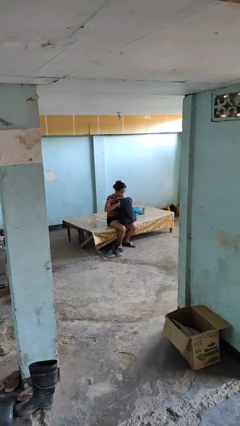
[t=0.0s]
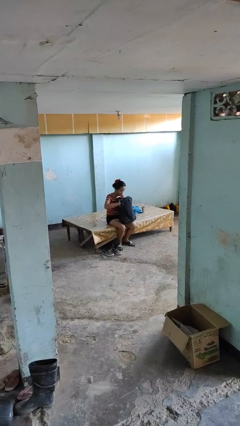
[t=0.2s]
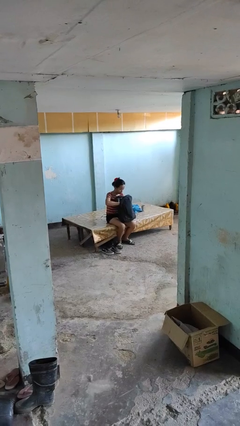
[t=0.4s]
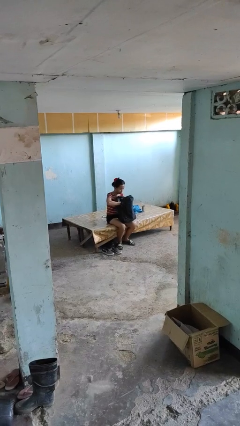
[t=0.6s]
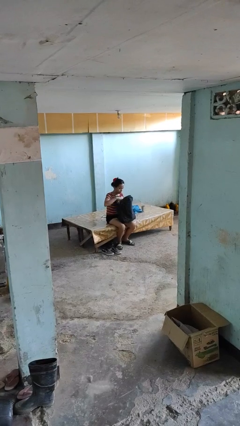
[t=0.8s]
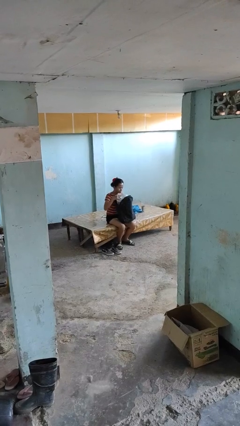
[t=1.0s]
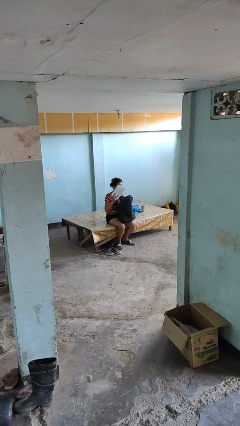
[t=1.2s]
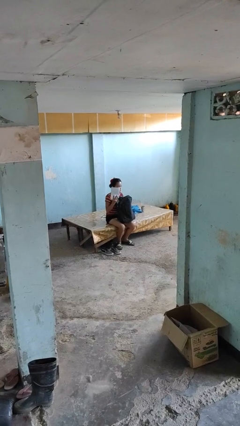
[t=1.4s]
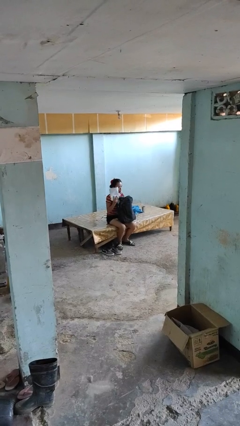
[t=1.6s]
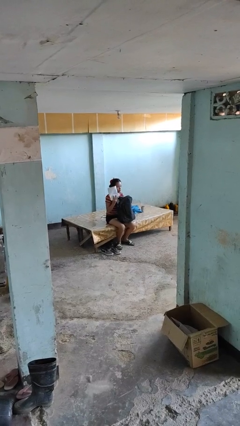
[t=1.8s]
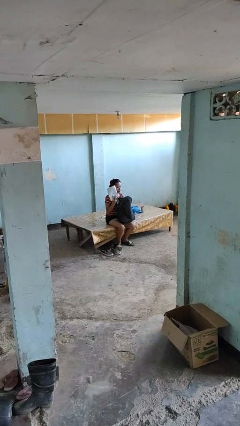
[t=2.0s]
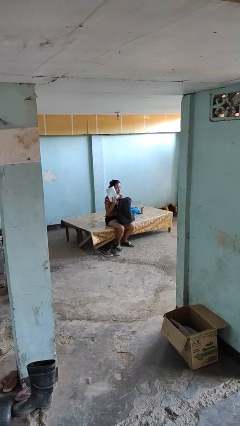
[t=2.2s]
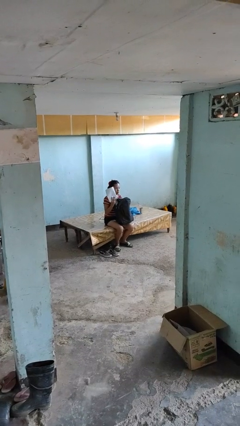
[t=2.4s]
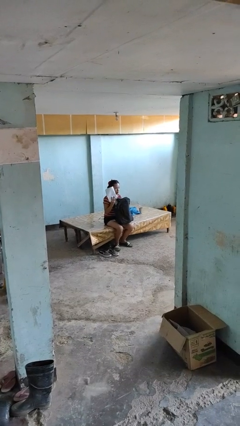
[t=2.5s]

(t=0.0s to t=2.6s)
person takes object from backpack

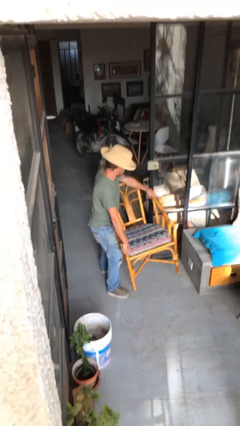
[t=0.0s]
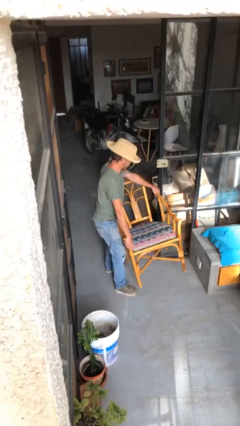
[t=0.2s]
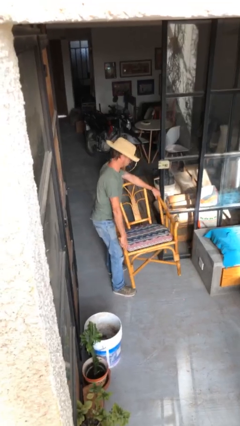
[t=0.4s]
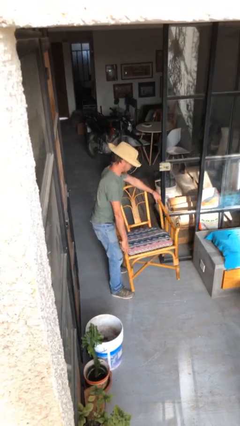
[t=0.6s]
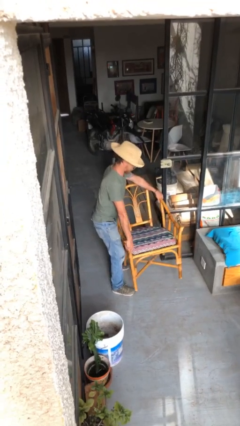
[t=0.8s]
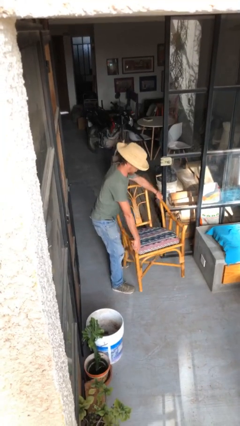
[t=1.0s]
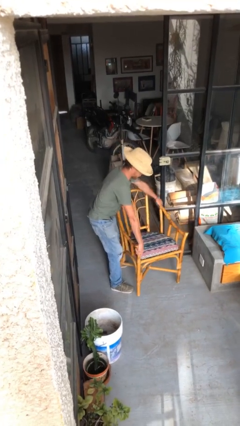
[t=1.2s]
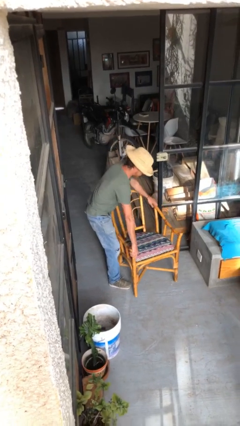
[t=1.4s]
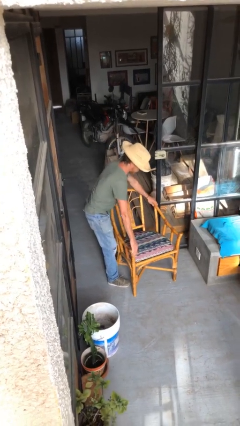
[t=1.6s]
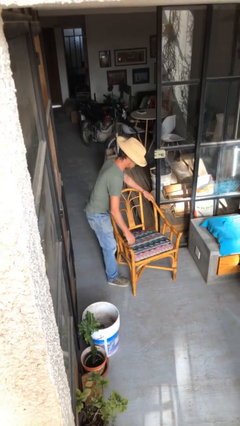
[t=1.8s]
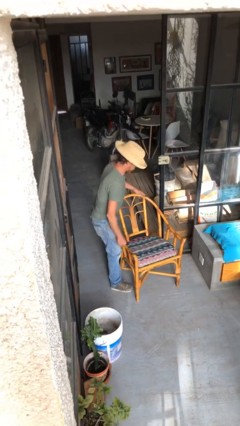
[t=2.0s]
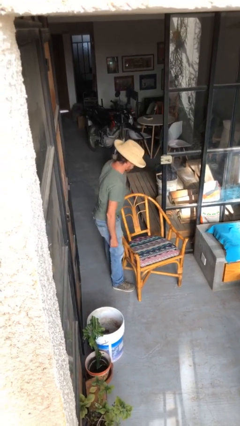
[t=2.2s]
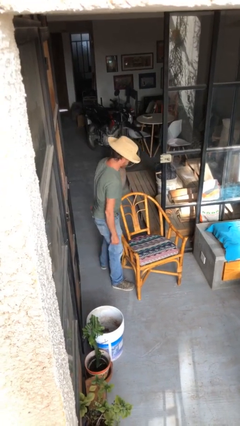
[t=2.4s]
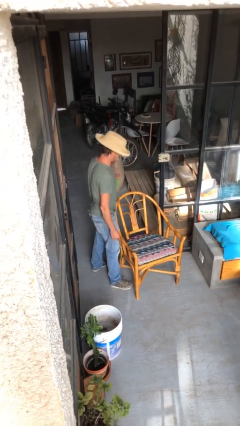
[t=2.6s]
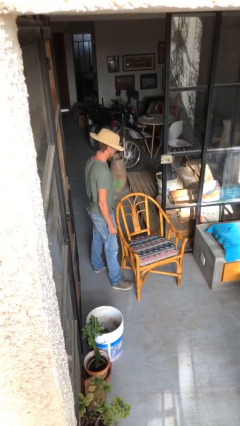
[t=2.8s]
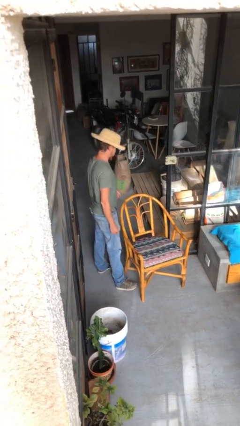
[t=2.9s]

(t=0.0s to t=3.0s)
person puts down object on floor

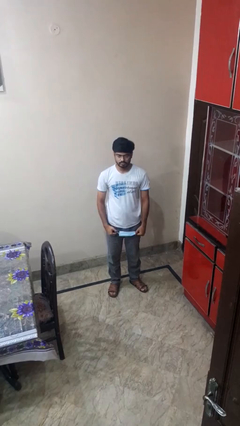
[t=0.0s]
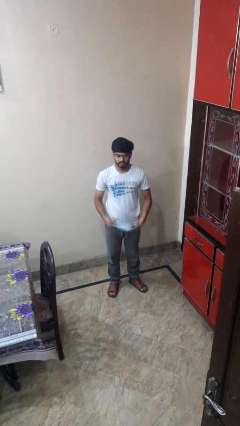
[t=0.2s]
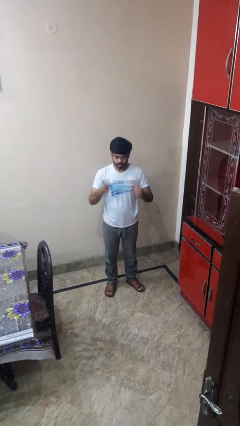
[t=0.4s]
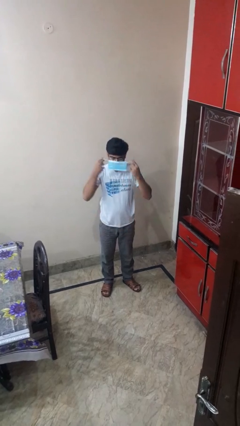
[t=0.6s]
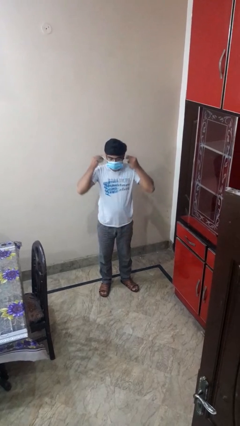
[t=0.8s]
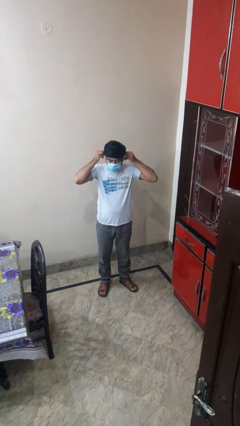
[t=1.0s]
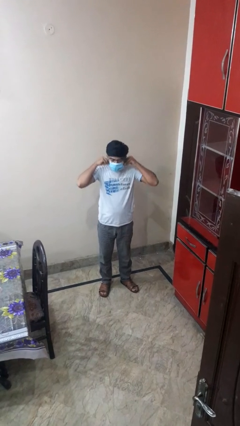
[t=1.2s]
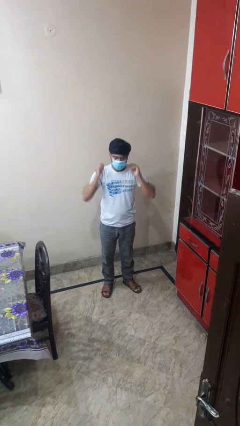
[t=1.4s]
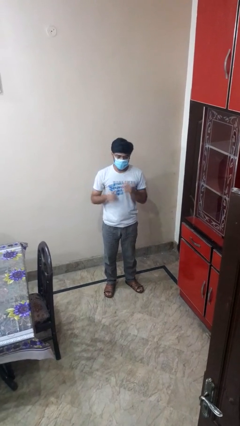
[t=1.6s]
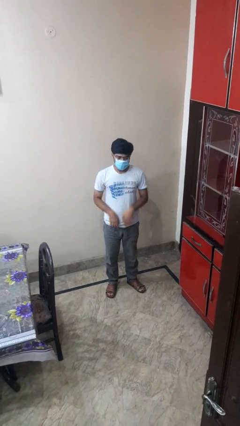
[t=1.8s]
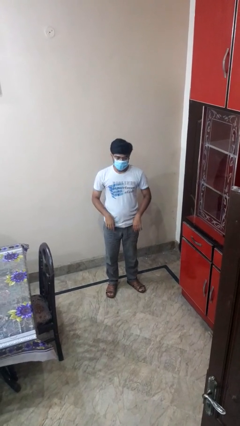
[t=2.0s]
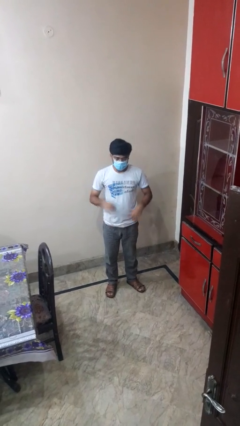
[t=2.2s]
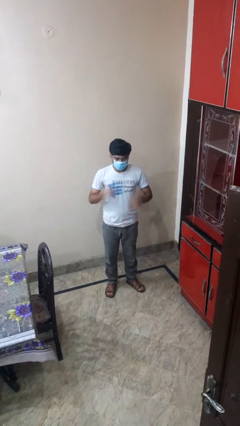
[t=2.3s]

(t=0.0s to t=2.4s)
person puts on facemask

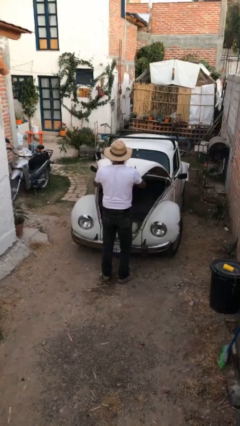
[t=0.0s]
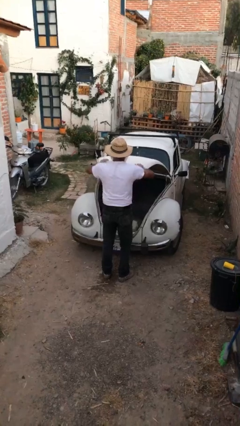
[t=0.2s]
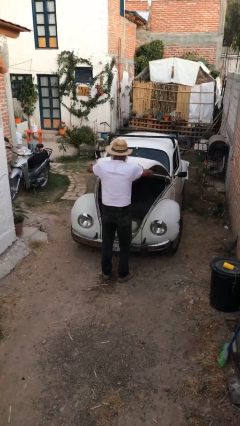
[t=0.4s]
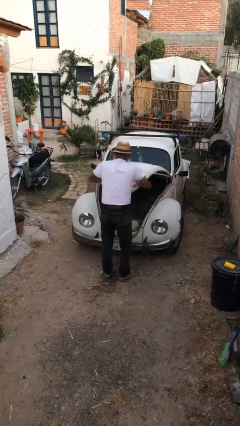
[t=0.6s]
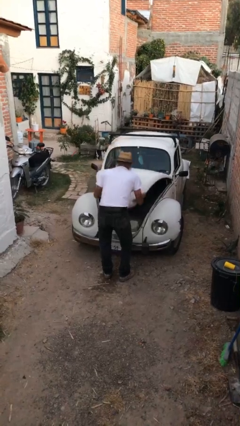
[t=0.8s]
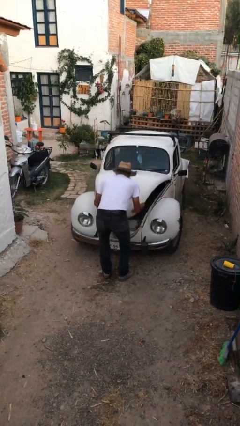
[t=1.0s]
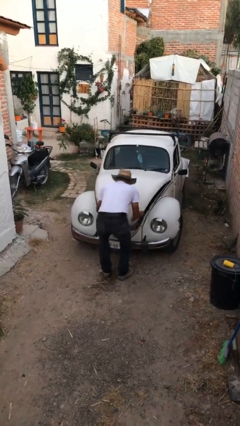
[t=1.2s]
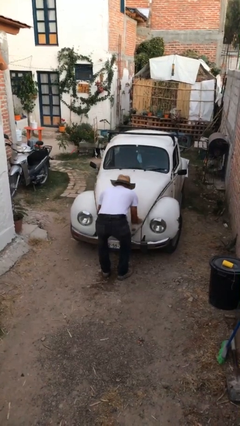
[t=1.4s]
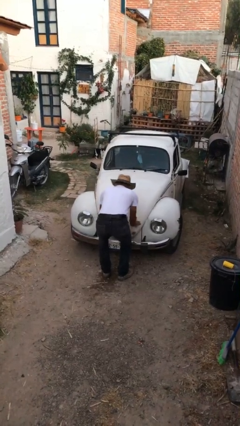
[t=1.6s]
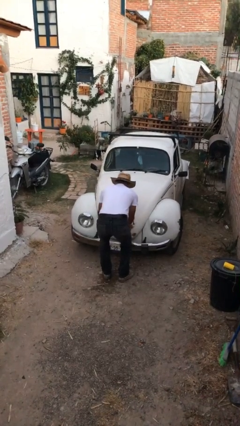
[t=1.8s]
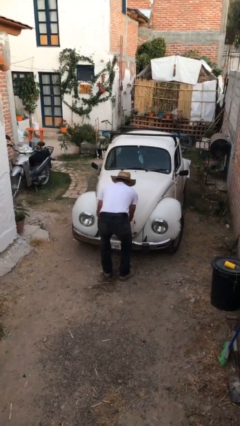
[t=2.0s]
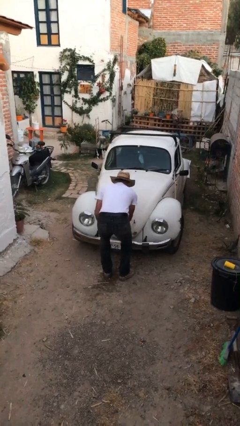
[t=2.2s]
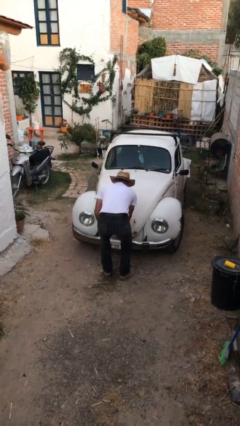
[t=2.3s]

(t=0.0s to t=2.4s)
person closes car trunk

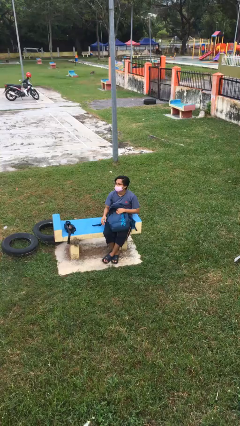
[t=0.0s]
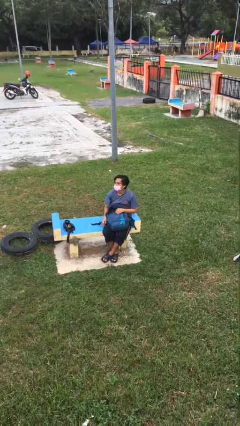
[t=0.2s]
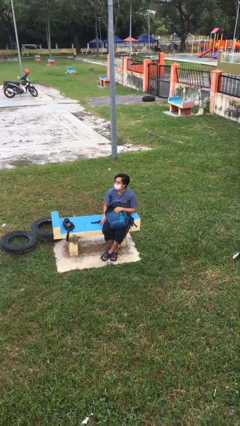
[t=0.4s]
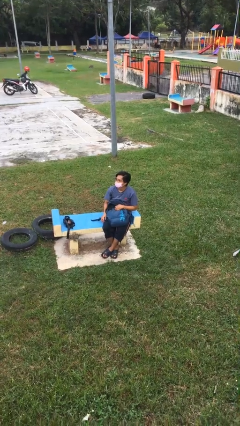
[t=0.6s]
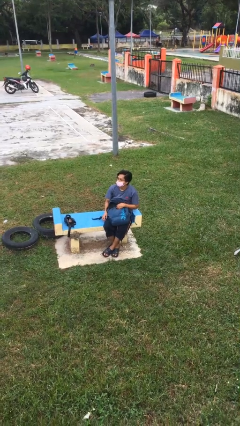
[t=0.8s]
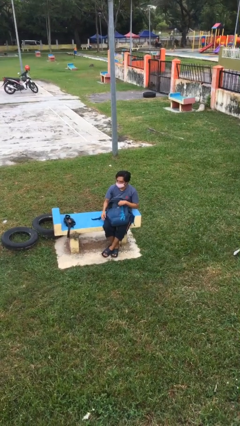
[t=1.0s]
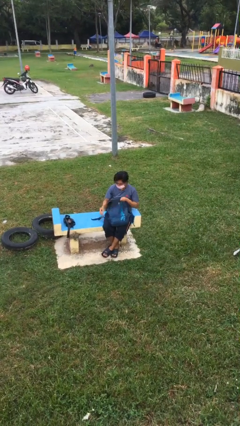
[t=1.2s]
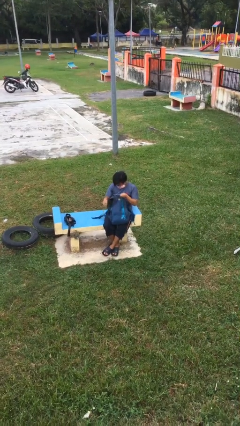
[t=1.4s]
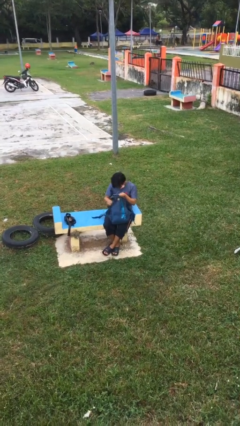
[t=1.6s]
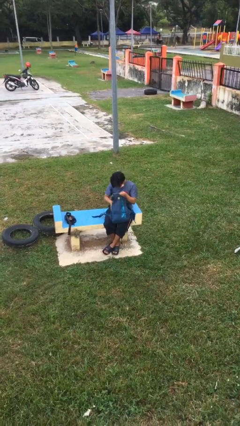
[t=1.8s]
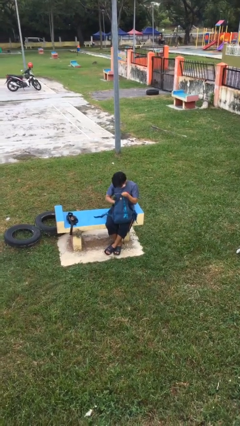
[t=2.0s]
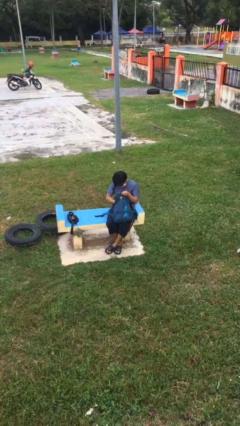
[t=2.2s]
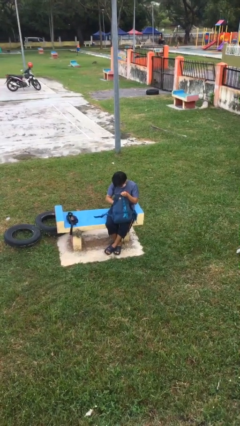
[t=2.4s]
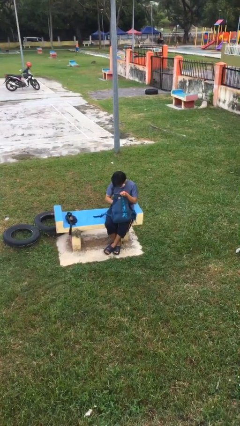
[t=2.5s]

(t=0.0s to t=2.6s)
person searches in backpack

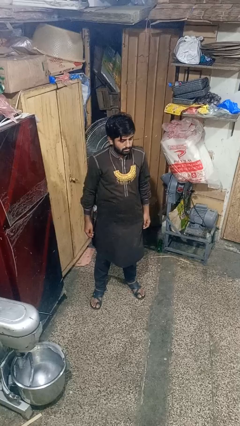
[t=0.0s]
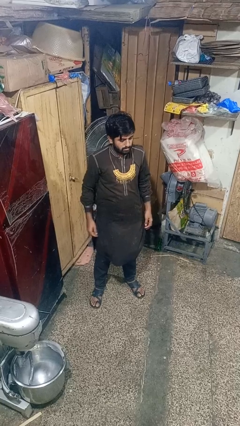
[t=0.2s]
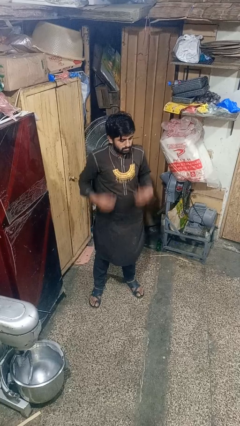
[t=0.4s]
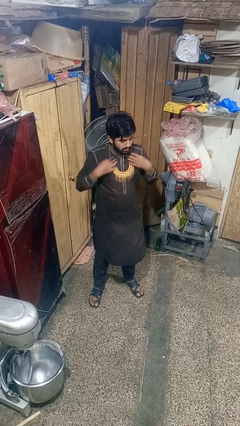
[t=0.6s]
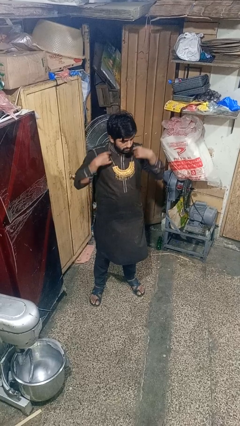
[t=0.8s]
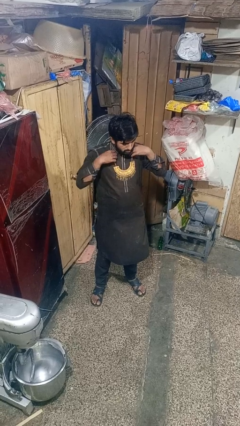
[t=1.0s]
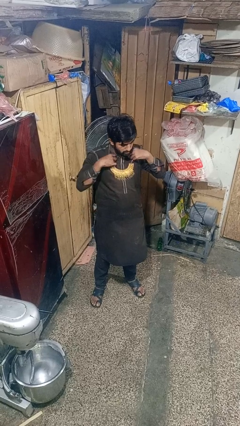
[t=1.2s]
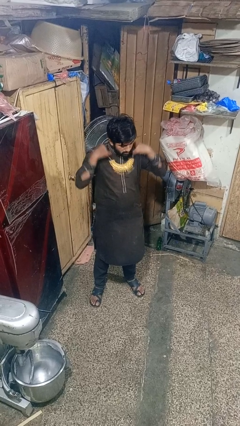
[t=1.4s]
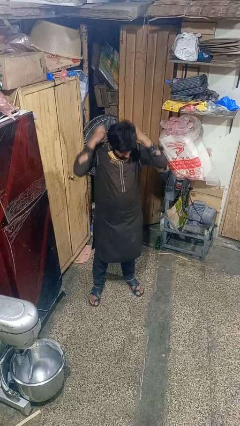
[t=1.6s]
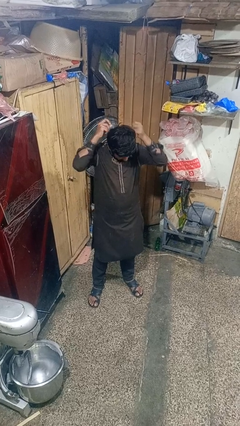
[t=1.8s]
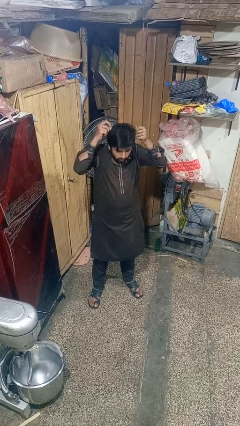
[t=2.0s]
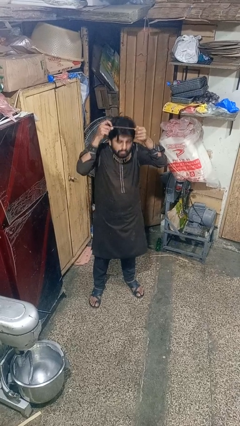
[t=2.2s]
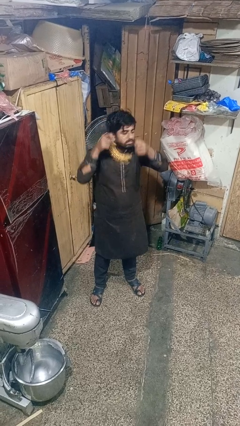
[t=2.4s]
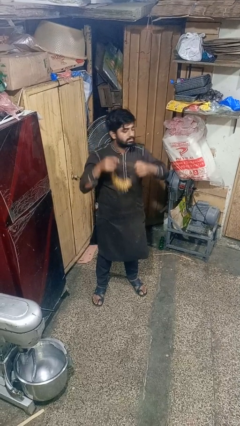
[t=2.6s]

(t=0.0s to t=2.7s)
person takes off necklace

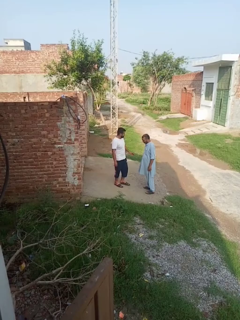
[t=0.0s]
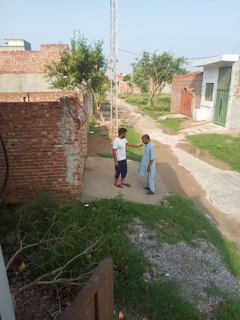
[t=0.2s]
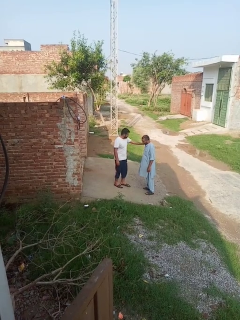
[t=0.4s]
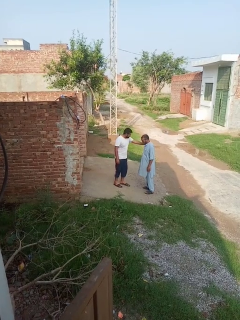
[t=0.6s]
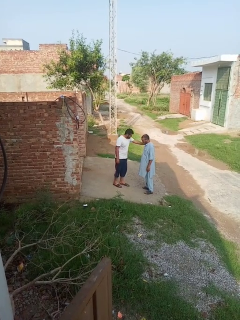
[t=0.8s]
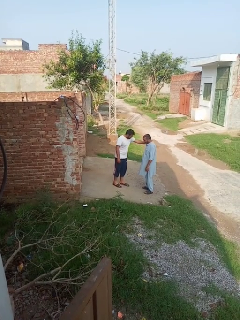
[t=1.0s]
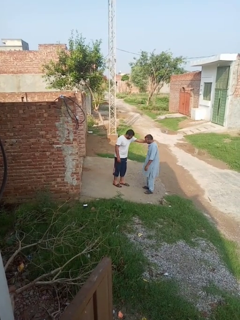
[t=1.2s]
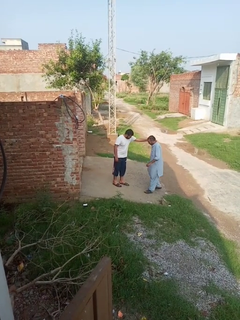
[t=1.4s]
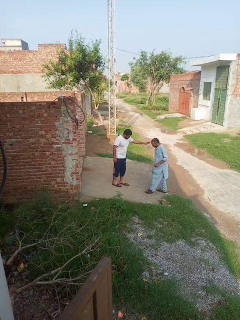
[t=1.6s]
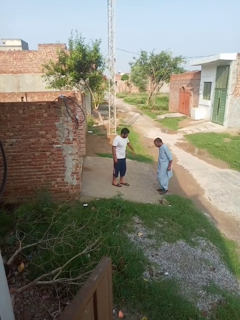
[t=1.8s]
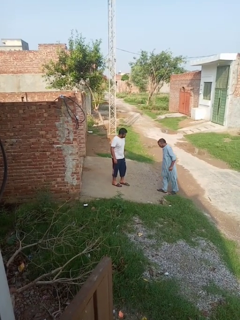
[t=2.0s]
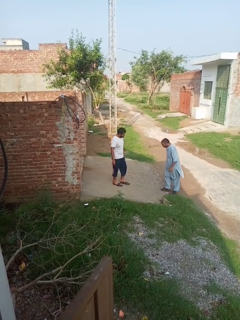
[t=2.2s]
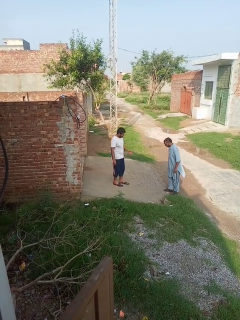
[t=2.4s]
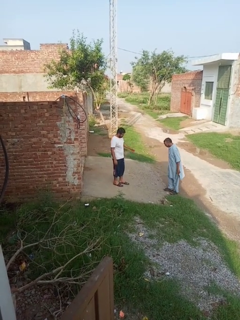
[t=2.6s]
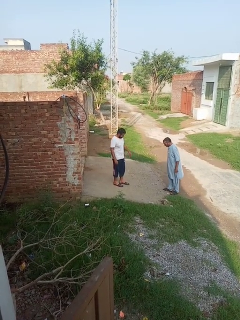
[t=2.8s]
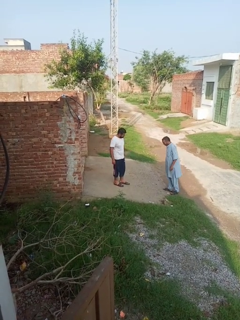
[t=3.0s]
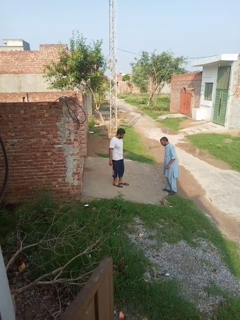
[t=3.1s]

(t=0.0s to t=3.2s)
person shoves person
